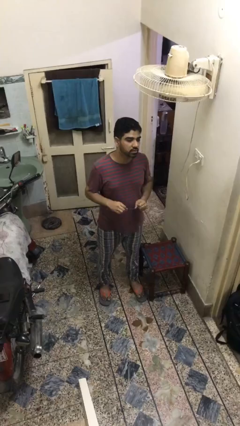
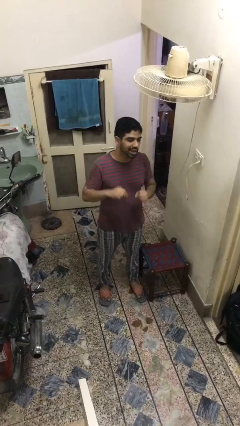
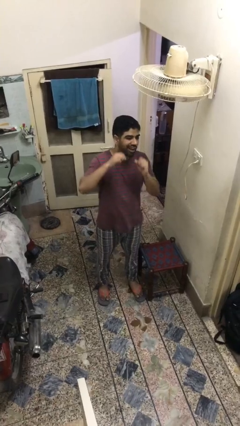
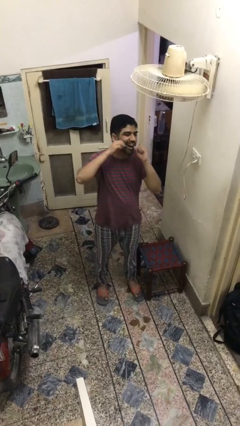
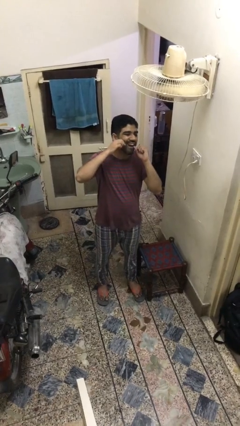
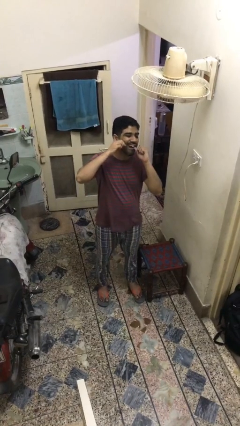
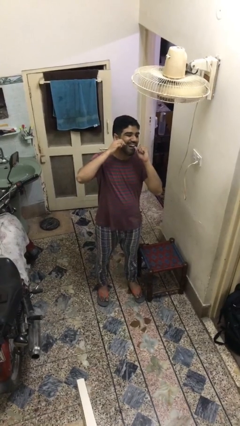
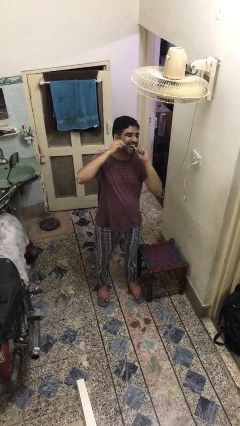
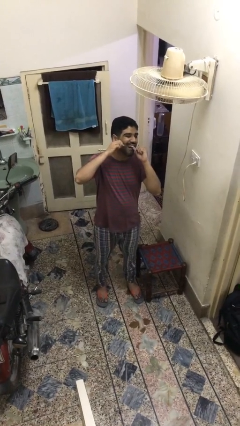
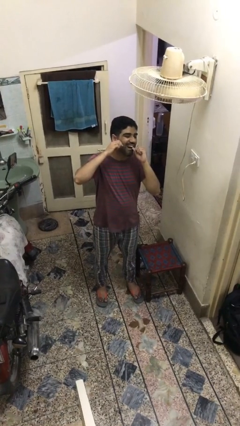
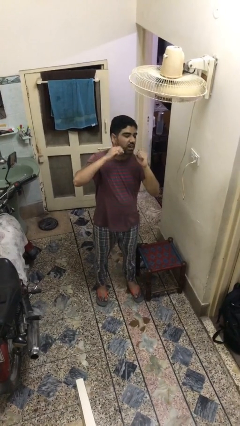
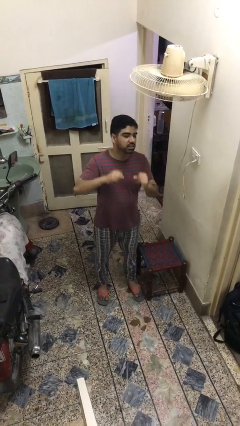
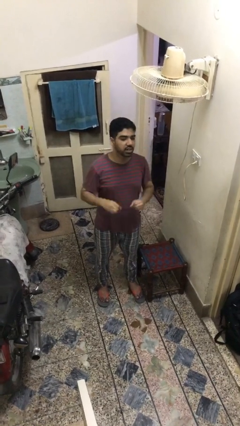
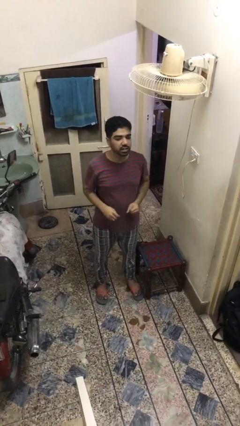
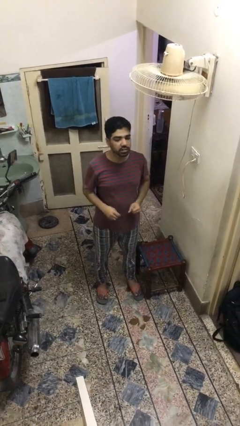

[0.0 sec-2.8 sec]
person flosses

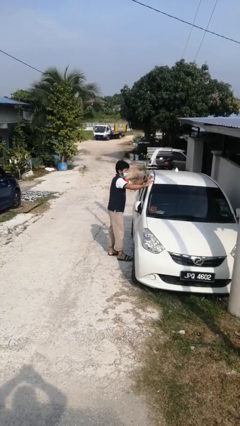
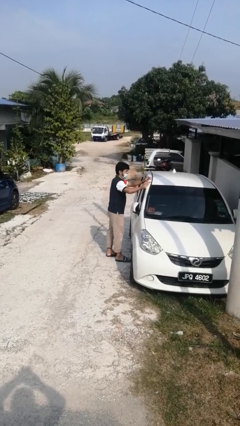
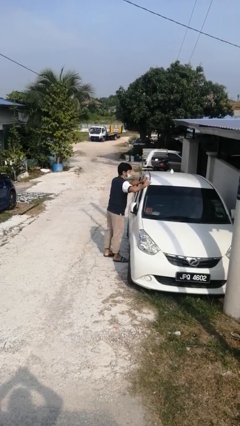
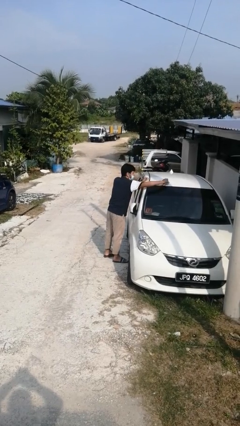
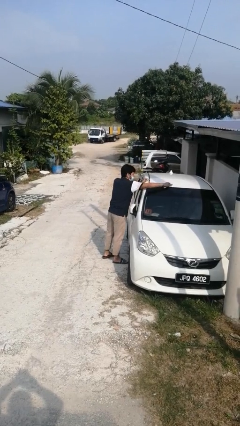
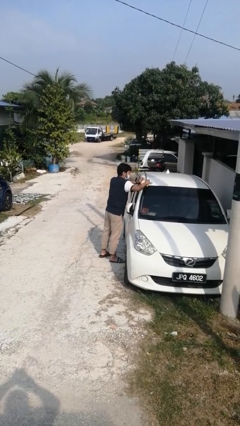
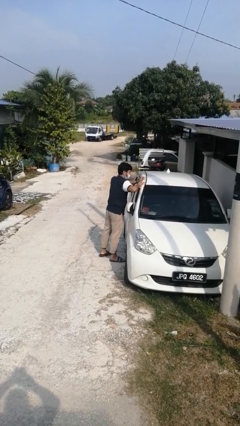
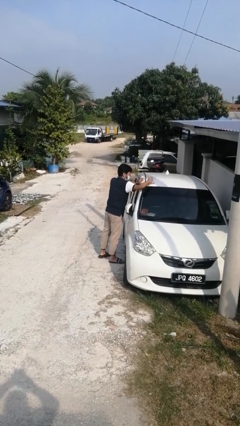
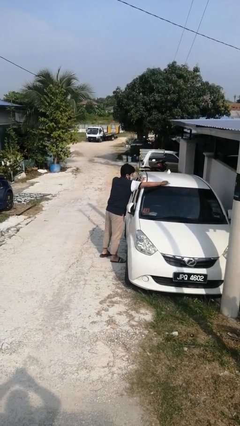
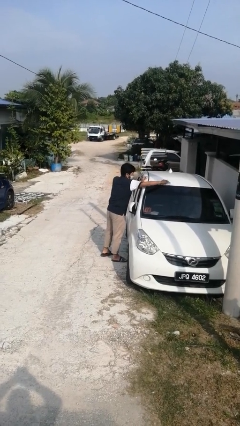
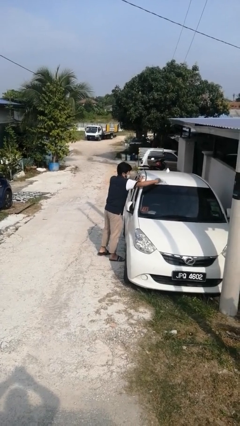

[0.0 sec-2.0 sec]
person polishes car with rag

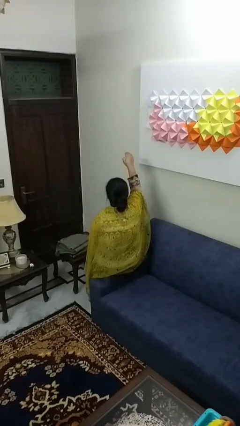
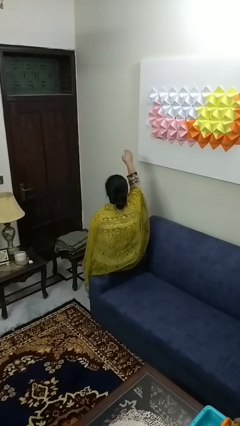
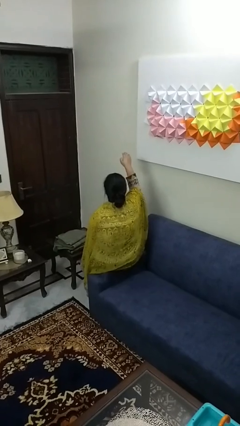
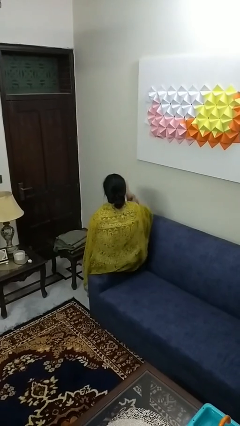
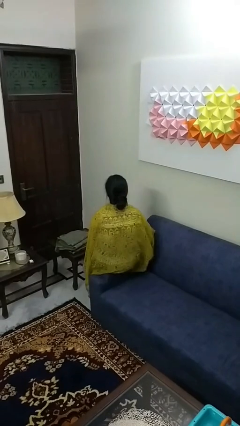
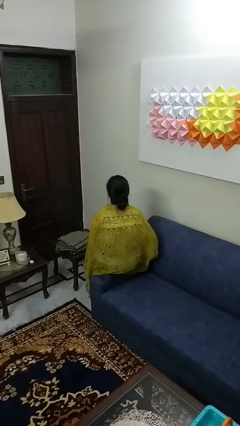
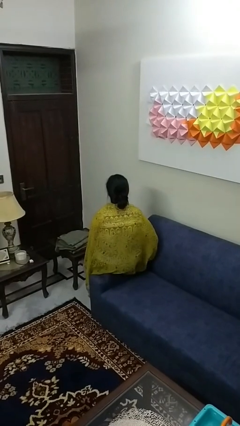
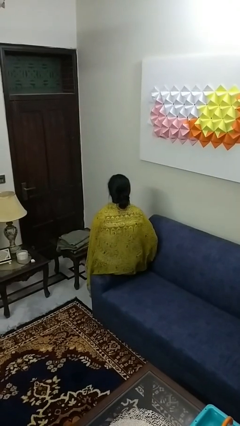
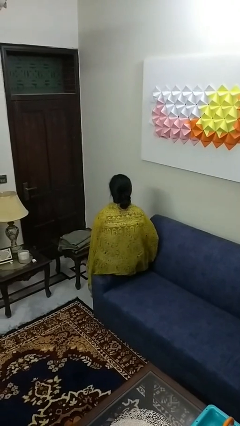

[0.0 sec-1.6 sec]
person gestures swipe down

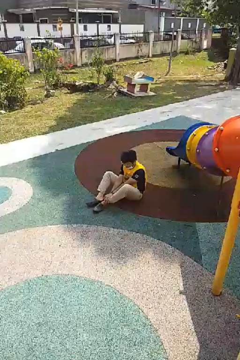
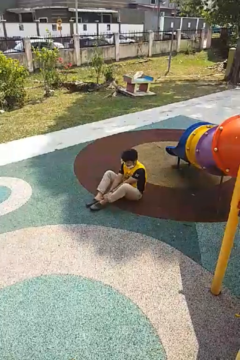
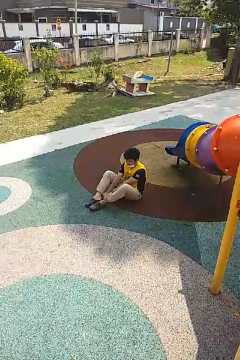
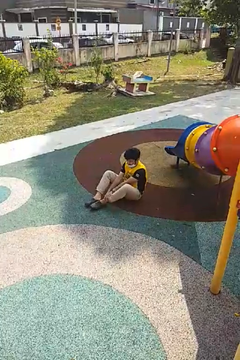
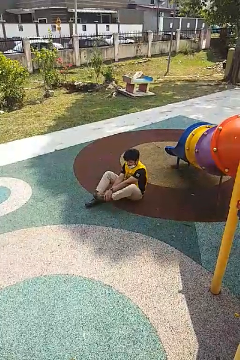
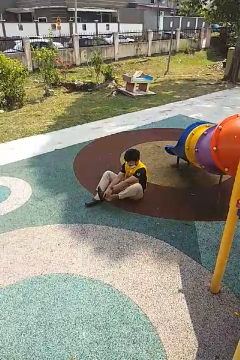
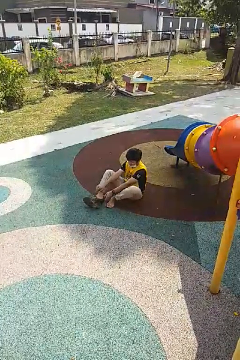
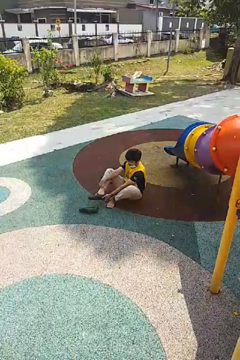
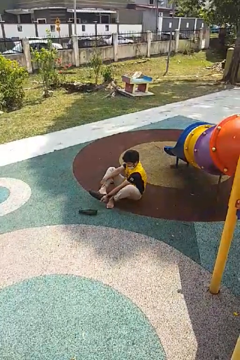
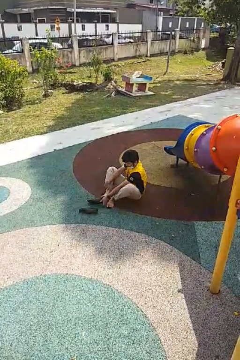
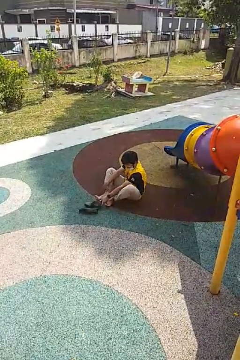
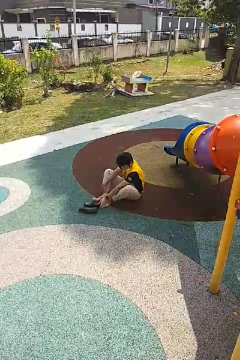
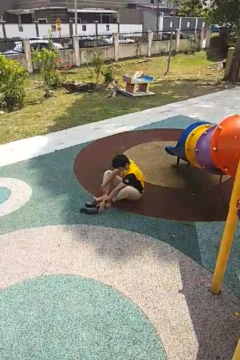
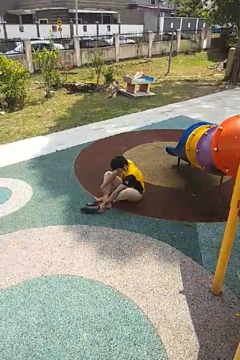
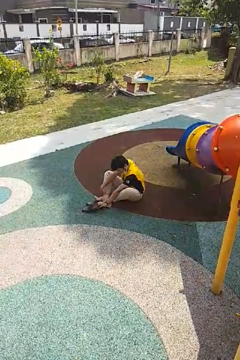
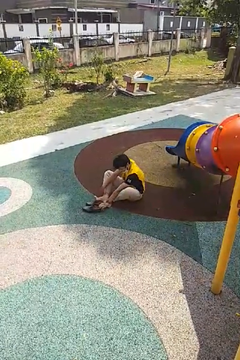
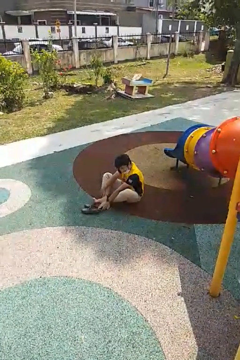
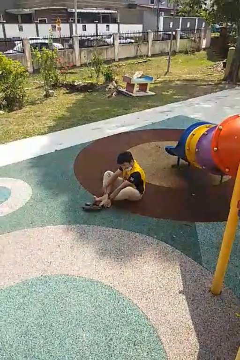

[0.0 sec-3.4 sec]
person takes off shoes

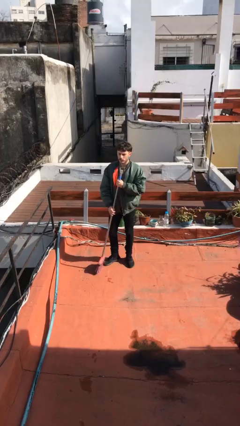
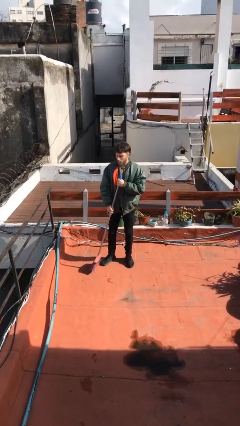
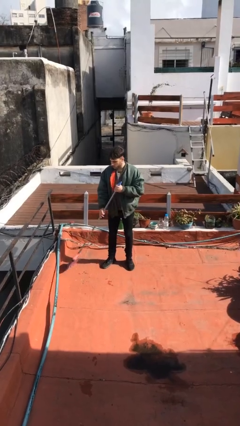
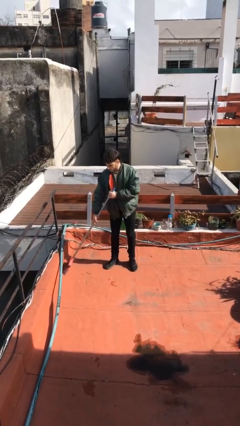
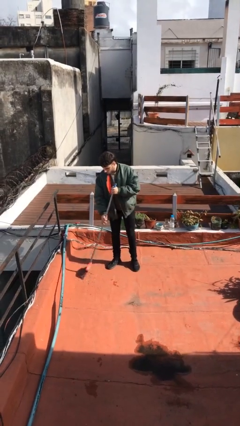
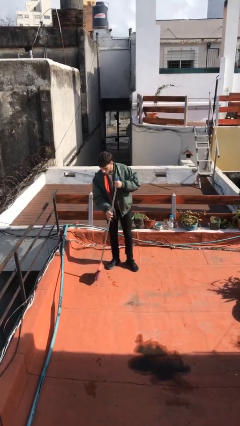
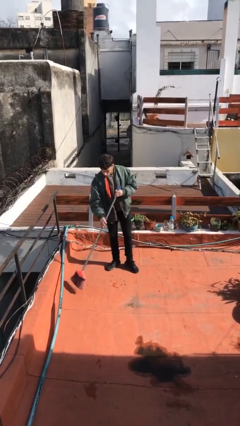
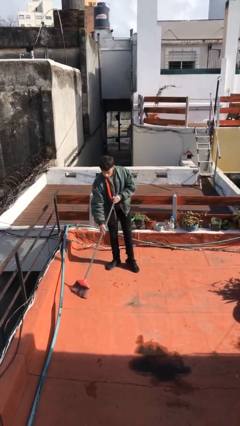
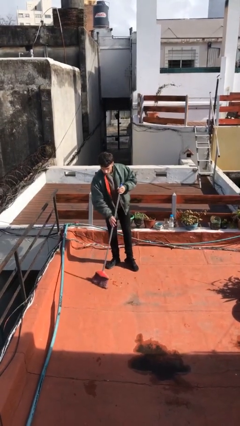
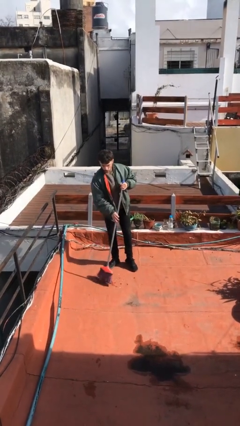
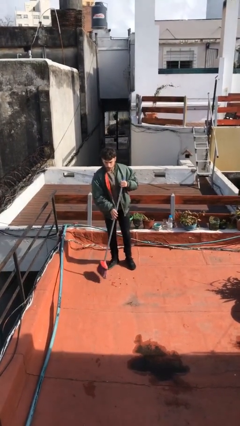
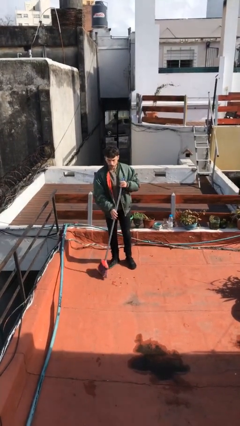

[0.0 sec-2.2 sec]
person sweeps floor

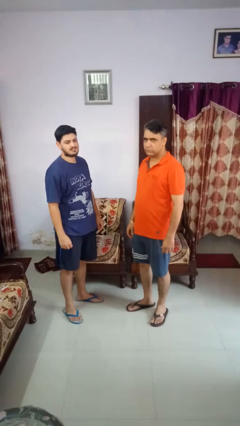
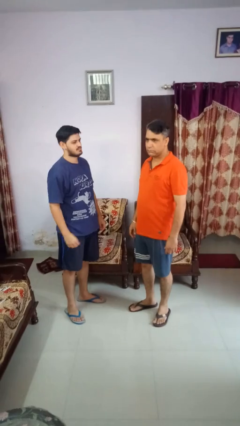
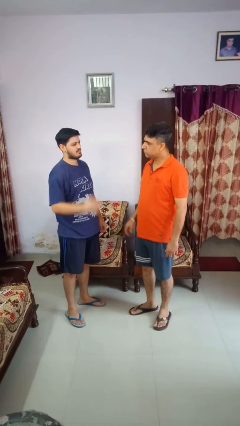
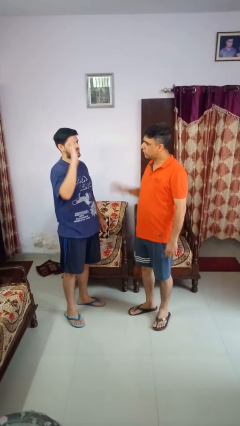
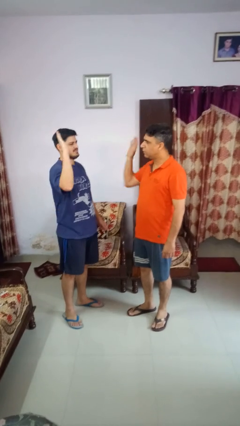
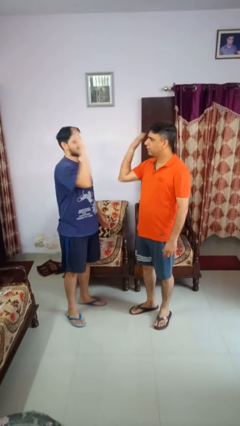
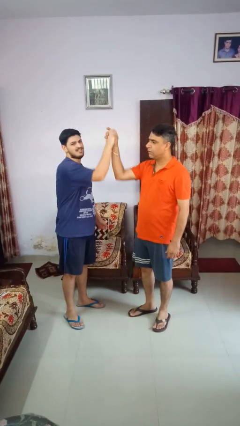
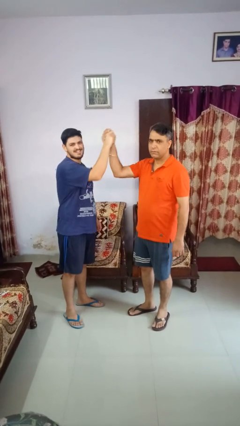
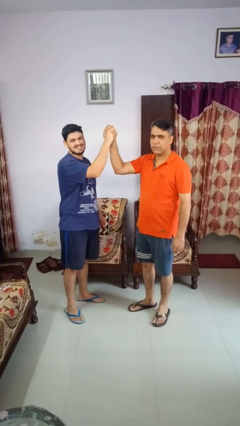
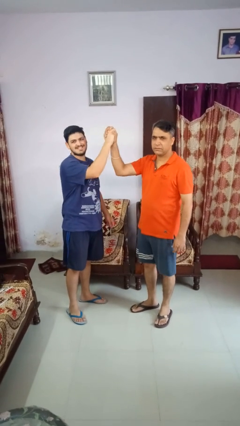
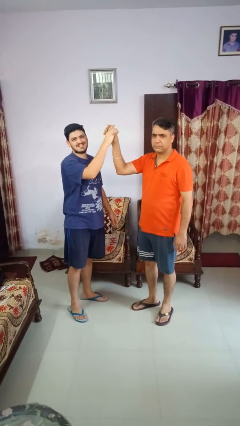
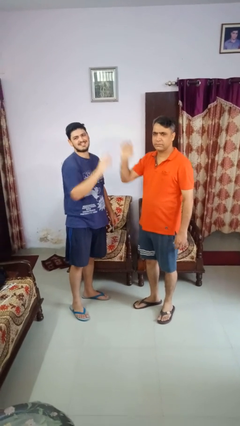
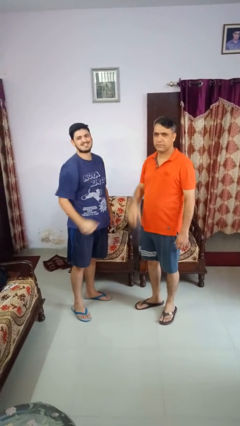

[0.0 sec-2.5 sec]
person highfives hand

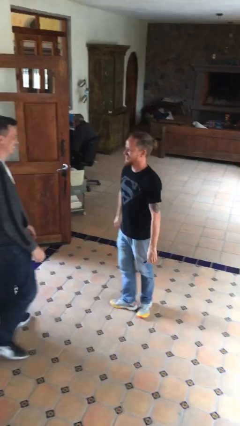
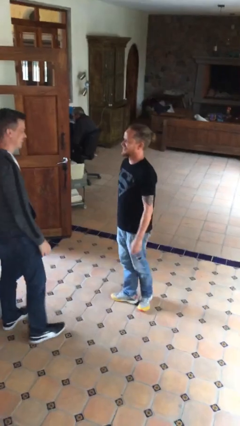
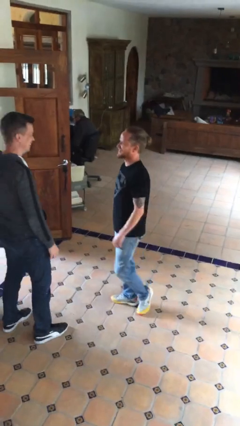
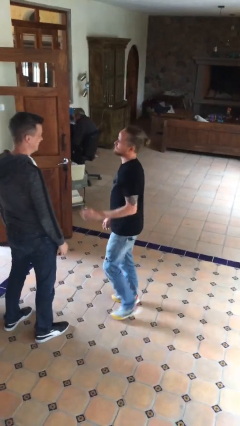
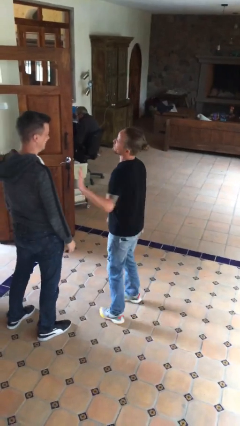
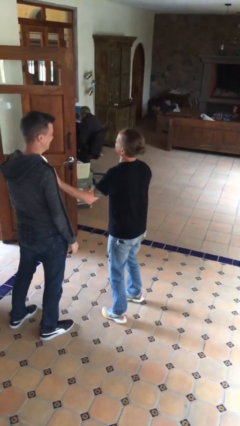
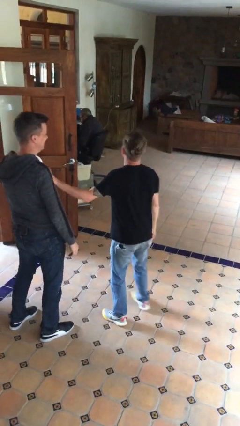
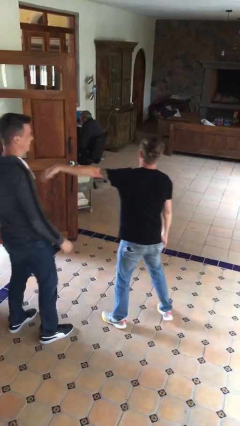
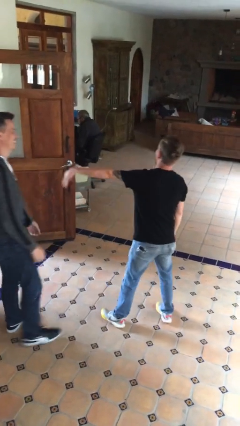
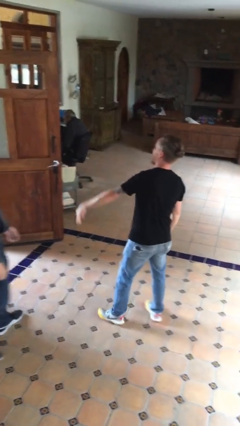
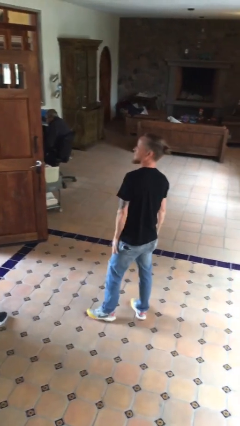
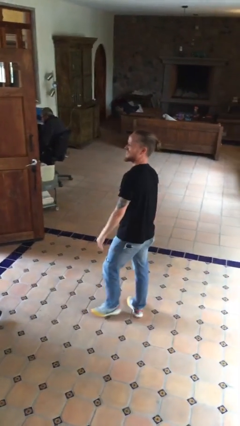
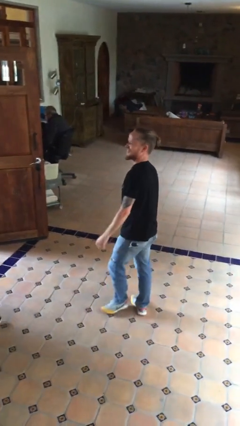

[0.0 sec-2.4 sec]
person shoves person

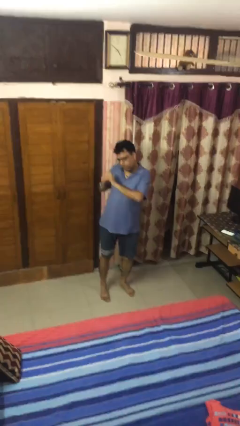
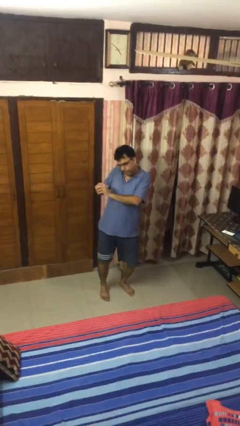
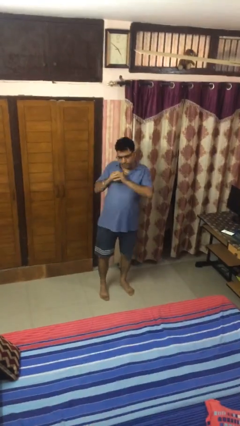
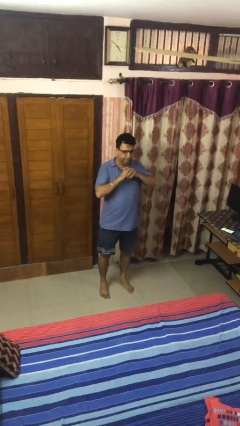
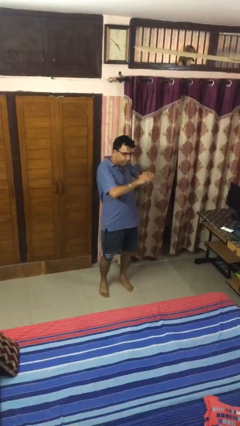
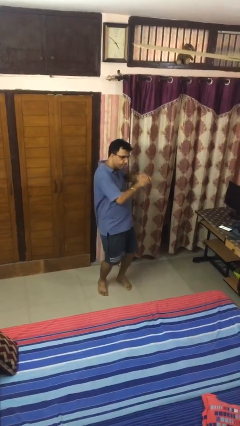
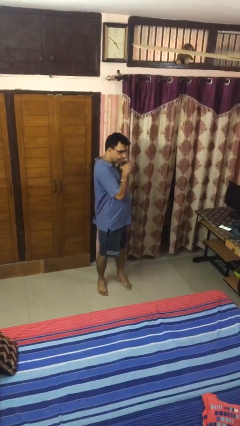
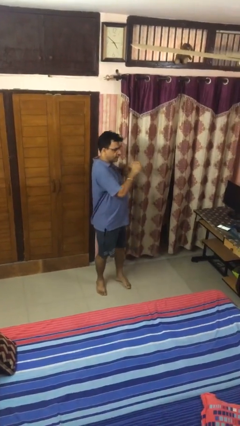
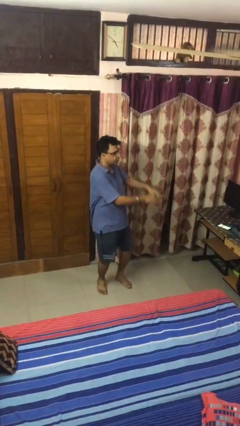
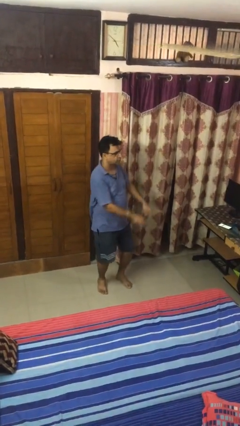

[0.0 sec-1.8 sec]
person dances in place
